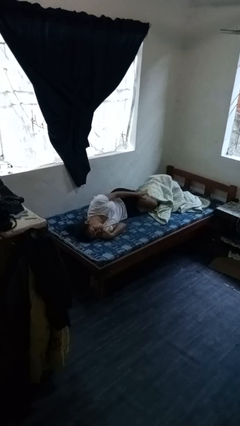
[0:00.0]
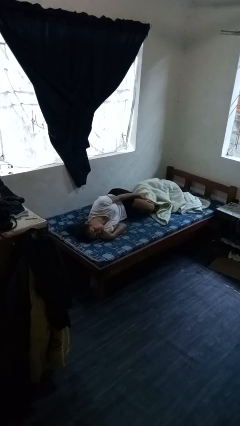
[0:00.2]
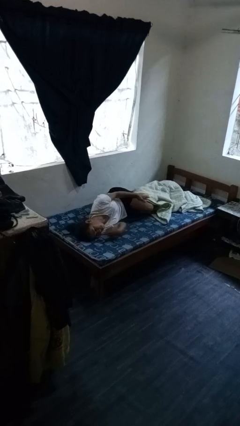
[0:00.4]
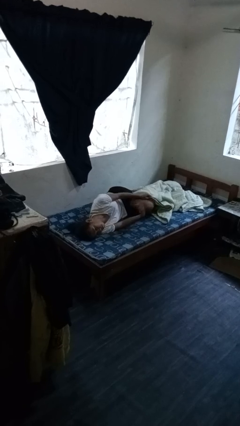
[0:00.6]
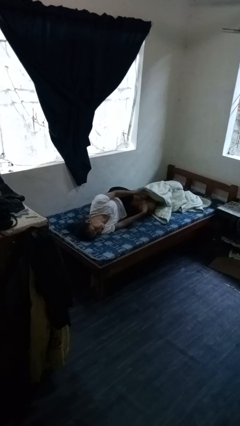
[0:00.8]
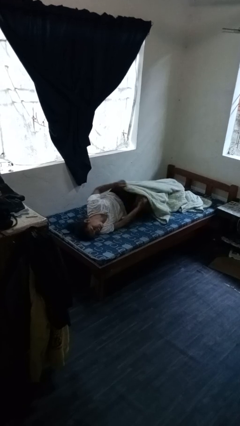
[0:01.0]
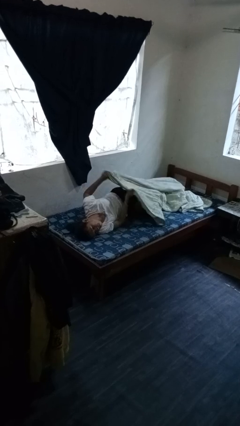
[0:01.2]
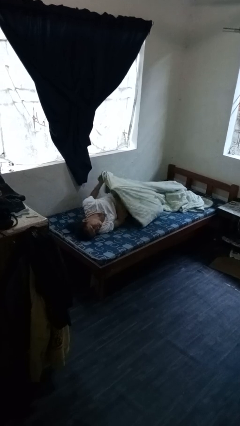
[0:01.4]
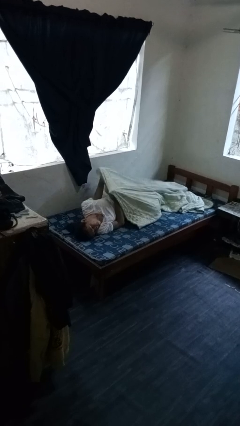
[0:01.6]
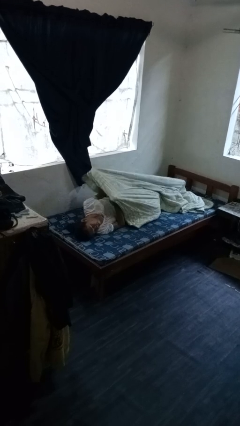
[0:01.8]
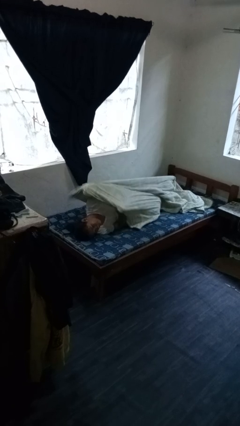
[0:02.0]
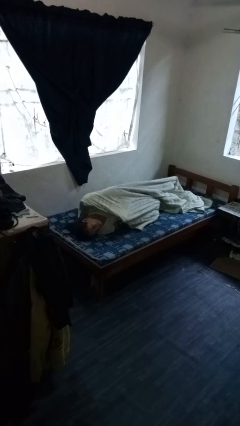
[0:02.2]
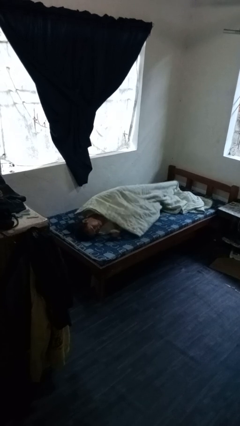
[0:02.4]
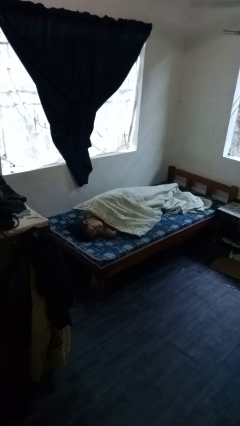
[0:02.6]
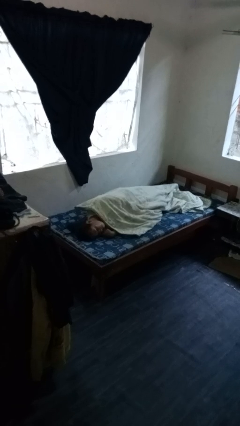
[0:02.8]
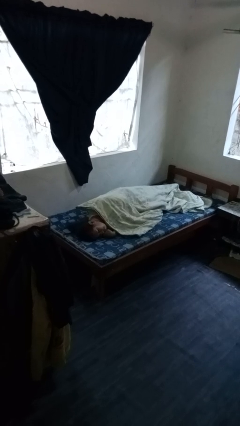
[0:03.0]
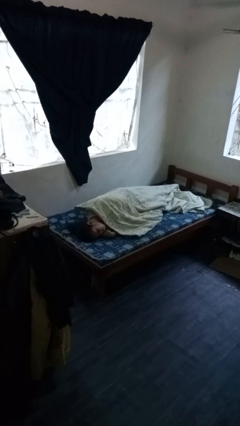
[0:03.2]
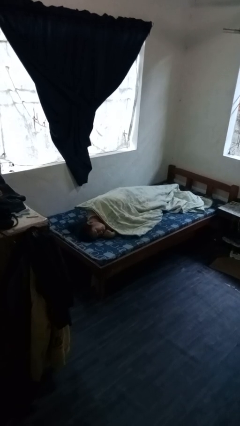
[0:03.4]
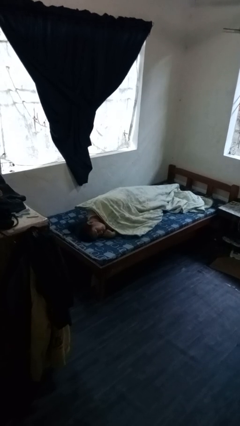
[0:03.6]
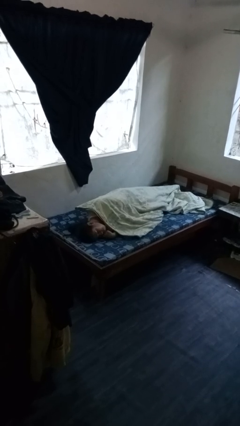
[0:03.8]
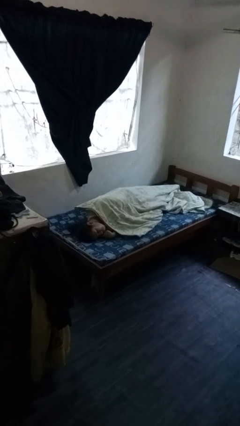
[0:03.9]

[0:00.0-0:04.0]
person covers with bedsheets

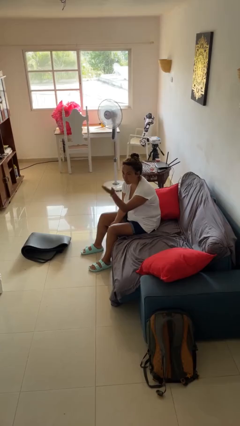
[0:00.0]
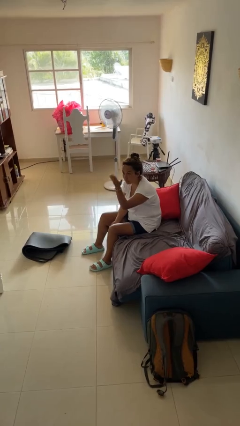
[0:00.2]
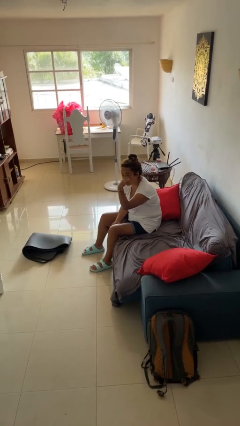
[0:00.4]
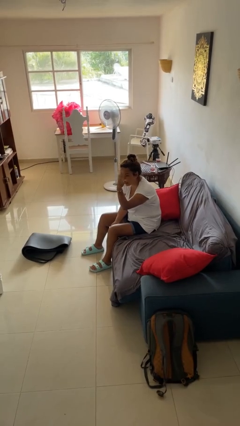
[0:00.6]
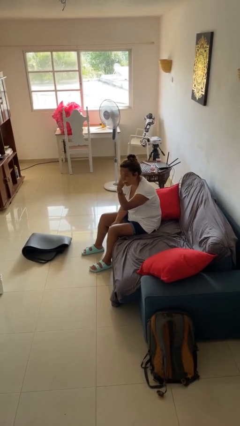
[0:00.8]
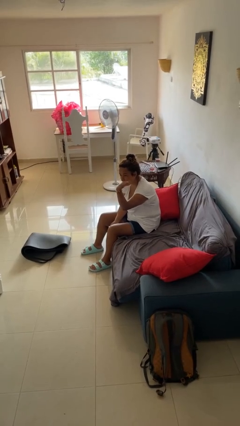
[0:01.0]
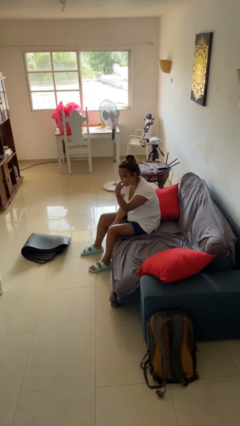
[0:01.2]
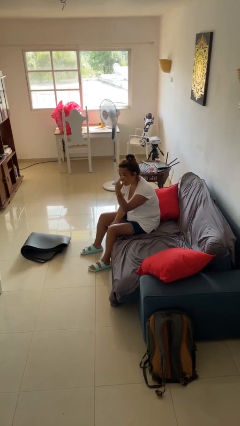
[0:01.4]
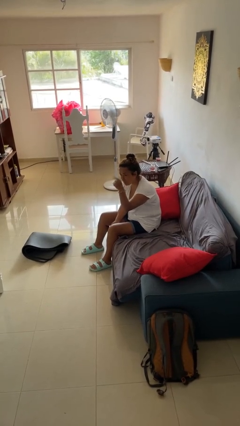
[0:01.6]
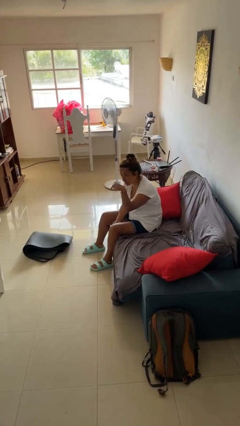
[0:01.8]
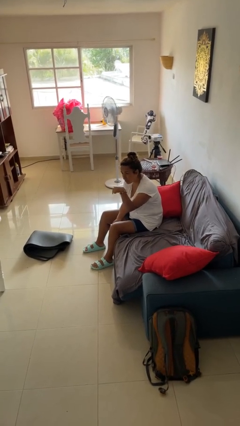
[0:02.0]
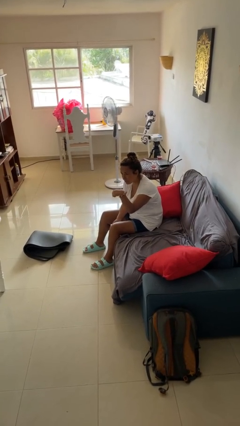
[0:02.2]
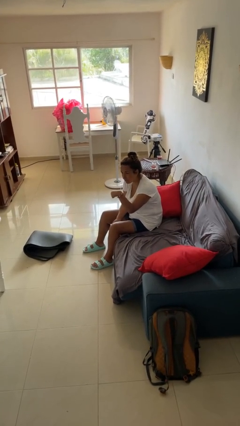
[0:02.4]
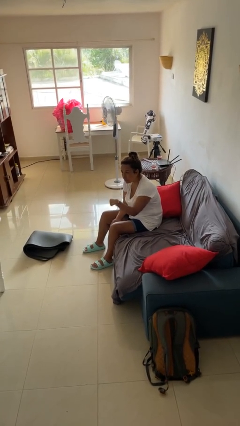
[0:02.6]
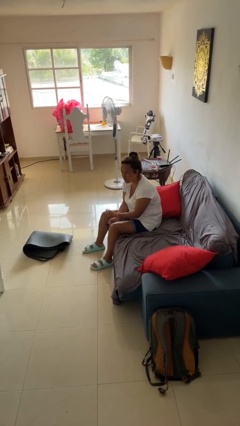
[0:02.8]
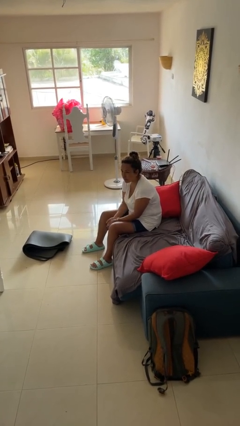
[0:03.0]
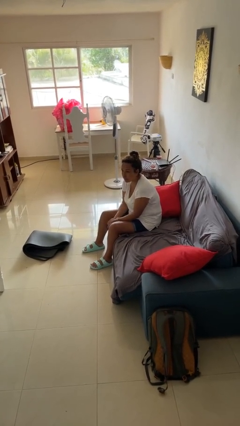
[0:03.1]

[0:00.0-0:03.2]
person gestures come here

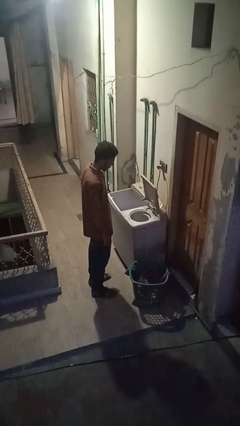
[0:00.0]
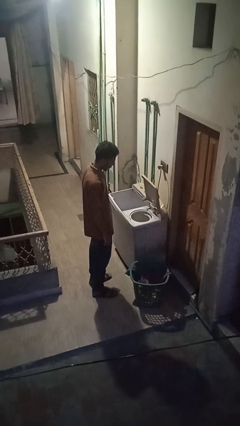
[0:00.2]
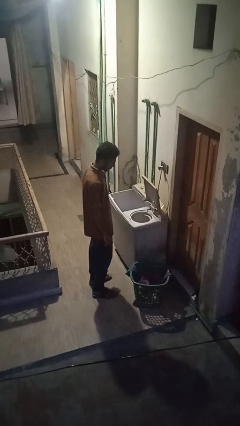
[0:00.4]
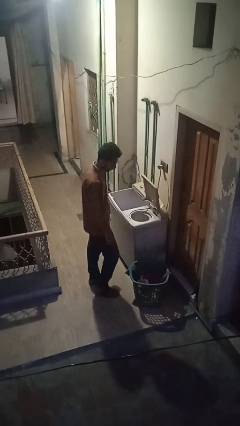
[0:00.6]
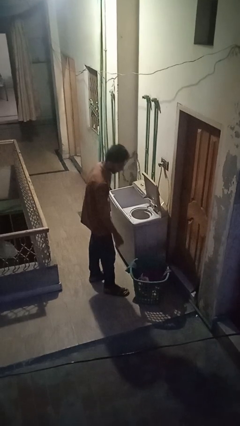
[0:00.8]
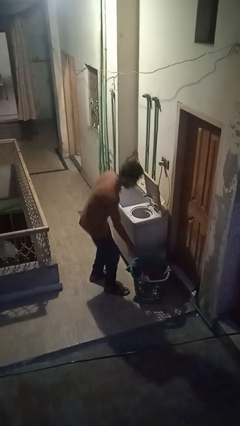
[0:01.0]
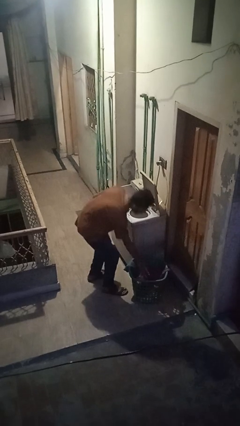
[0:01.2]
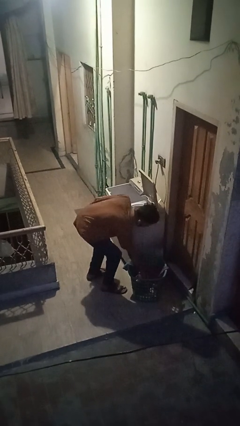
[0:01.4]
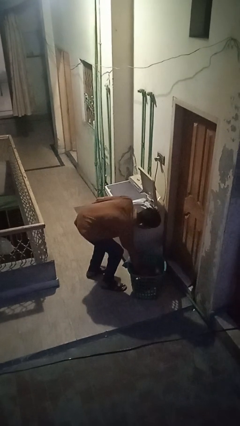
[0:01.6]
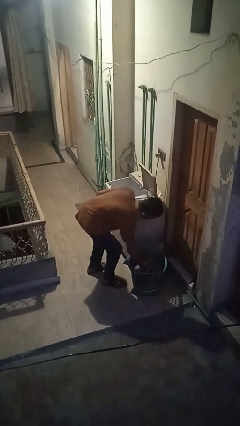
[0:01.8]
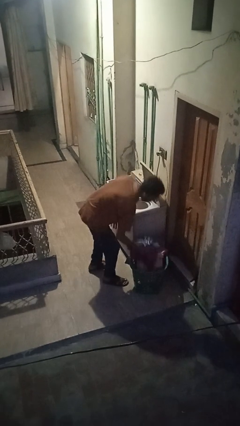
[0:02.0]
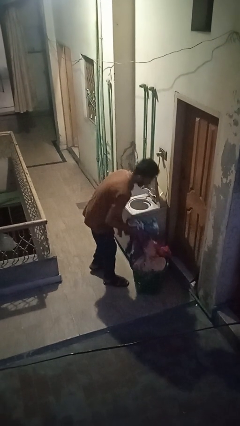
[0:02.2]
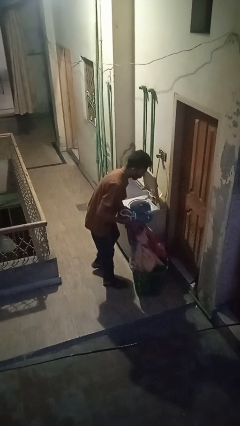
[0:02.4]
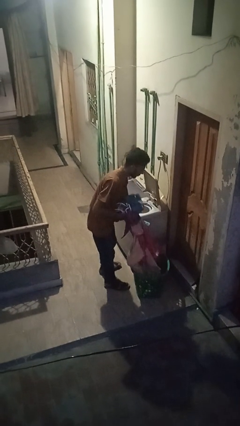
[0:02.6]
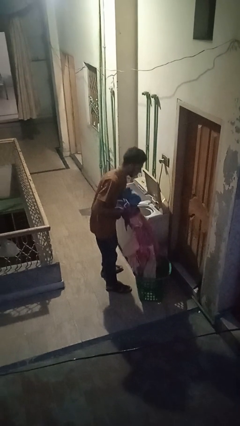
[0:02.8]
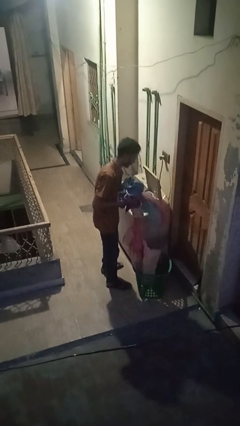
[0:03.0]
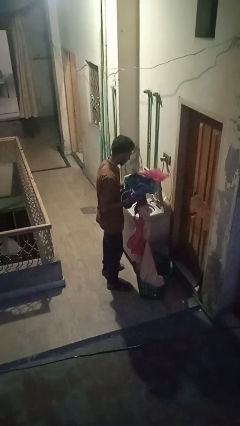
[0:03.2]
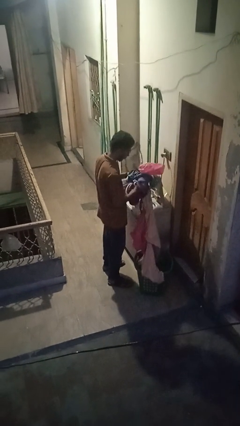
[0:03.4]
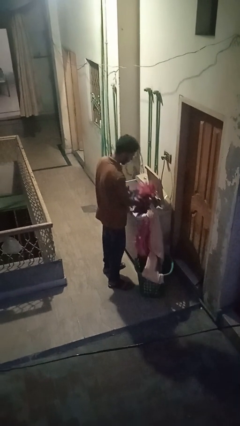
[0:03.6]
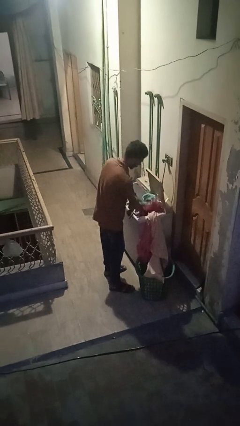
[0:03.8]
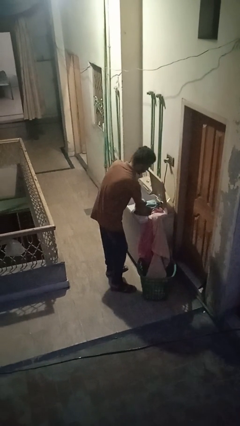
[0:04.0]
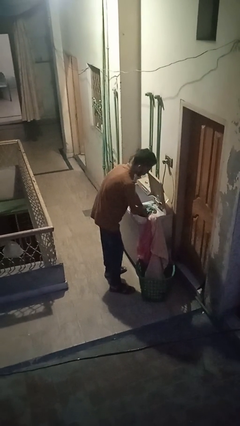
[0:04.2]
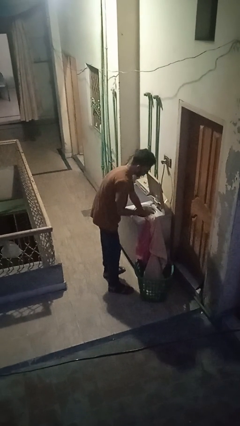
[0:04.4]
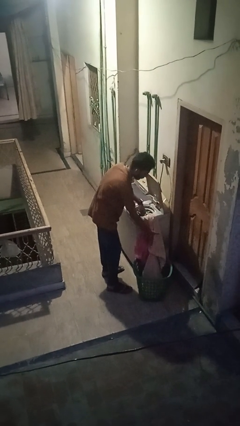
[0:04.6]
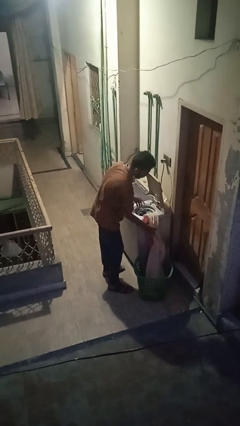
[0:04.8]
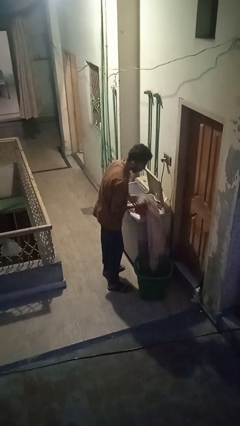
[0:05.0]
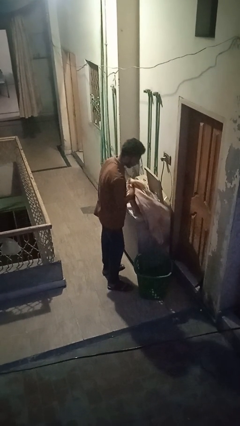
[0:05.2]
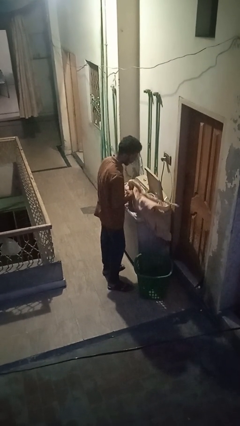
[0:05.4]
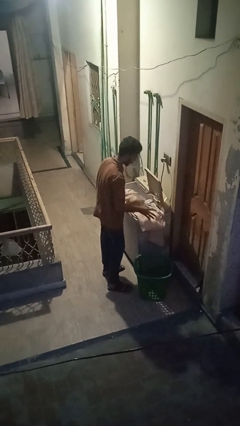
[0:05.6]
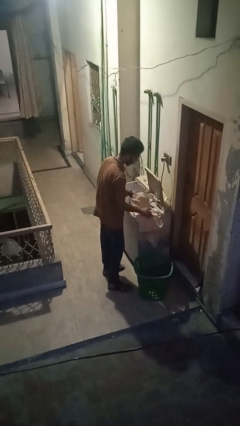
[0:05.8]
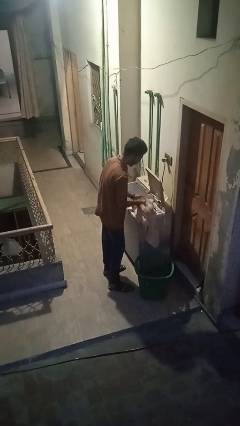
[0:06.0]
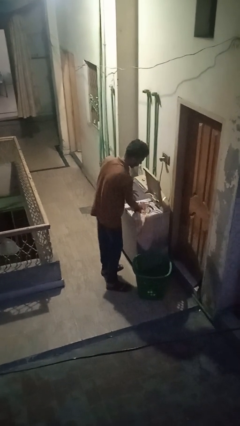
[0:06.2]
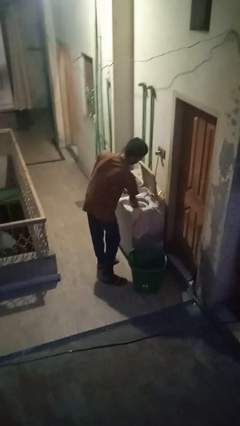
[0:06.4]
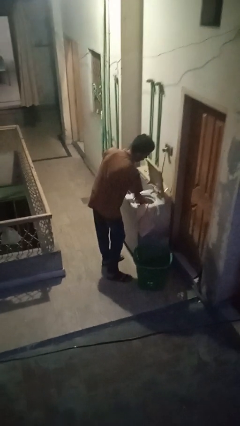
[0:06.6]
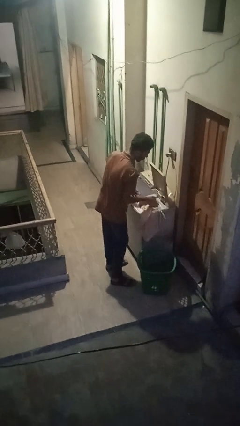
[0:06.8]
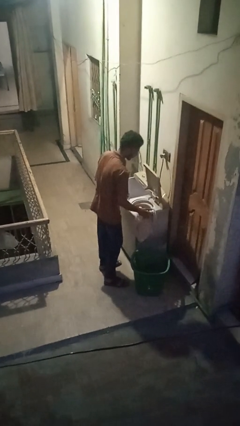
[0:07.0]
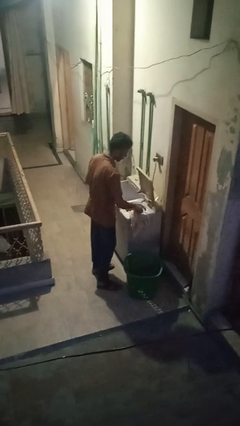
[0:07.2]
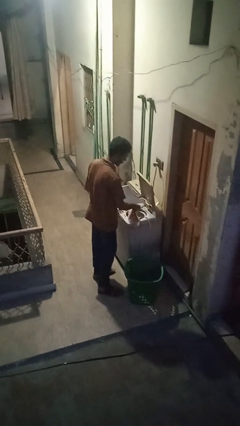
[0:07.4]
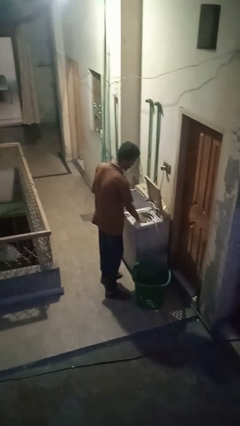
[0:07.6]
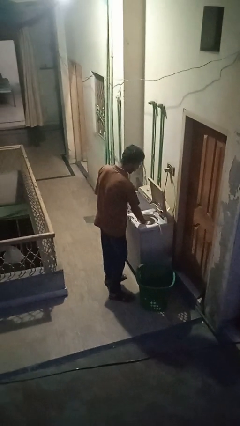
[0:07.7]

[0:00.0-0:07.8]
person loads dryer

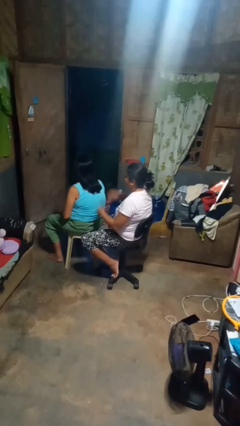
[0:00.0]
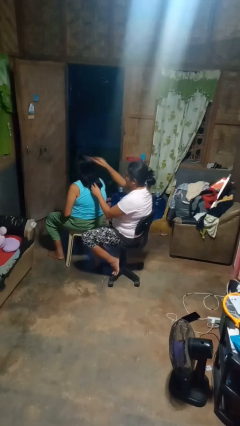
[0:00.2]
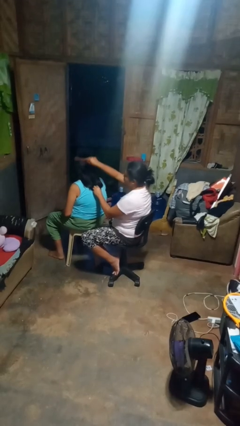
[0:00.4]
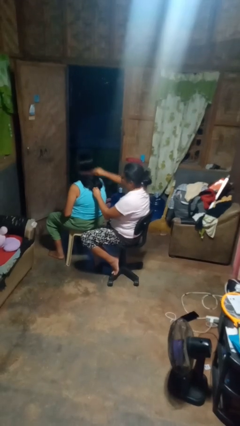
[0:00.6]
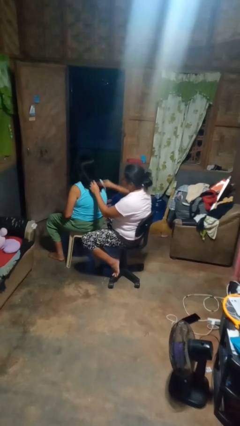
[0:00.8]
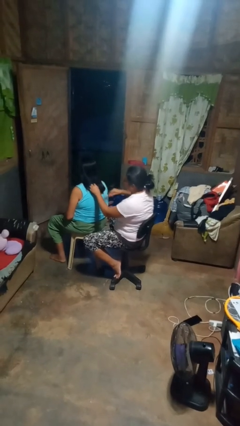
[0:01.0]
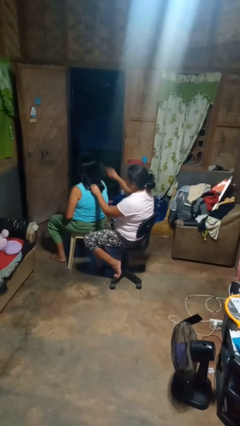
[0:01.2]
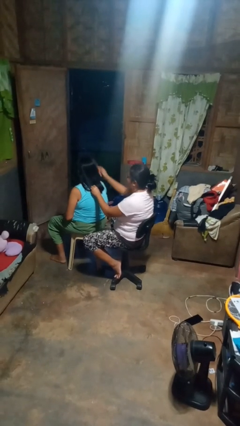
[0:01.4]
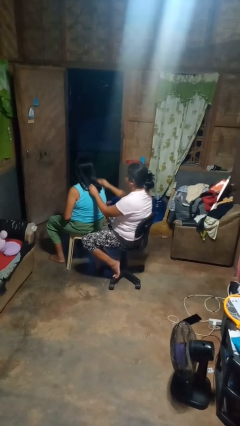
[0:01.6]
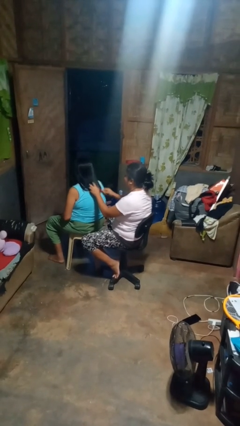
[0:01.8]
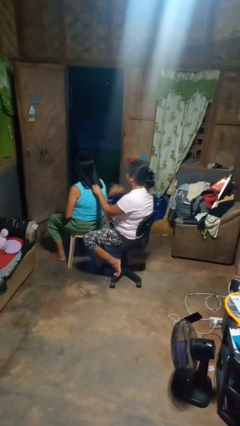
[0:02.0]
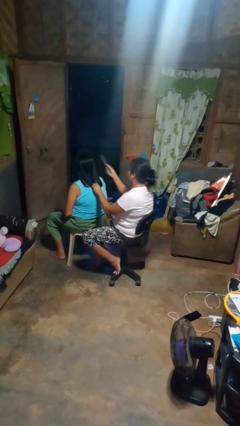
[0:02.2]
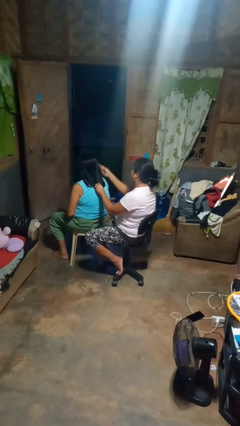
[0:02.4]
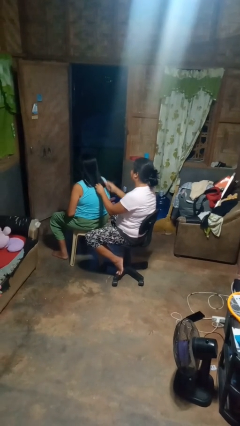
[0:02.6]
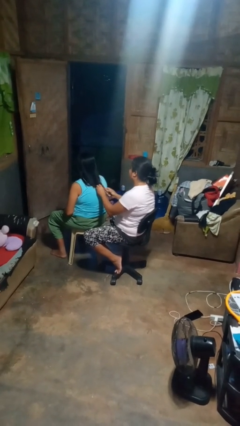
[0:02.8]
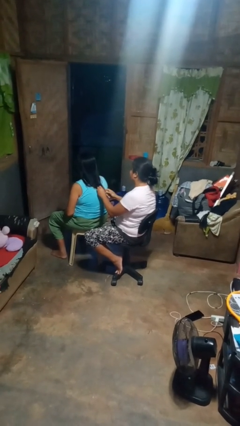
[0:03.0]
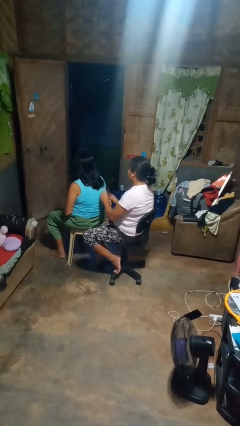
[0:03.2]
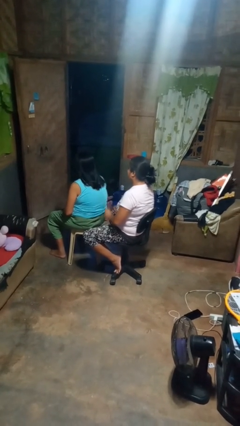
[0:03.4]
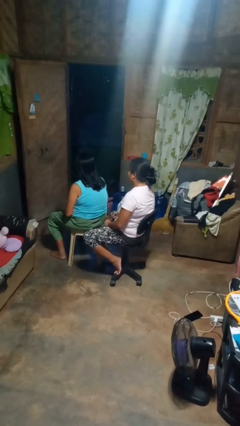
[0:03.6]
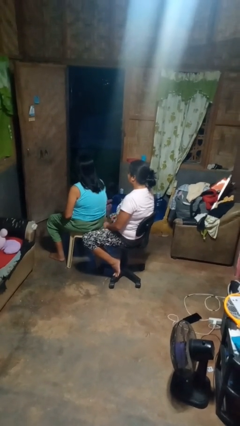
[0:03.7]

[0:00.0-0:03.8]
person brushes hair of person
